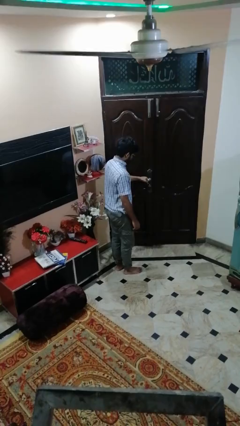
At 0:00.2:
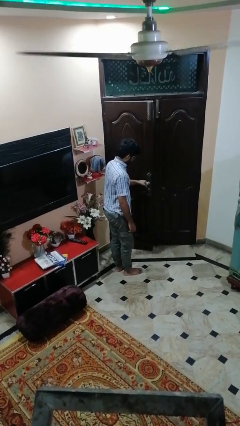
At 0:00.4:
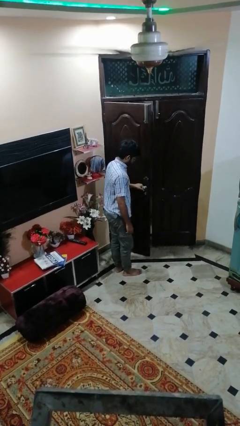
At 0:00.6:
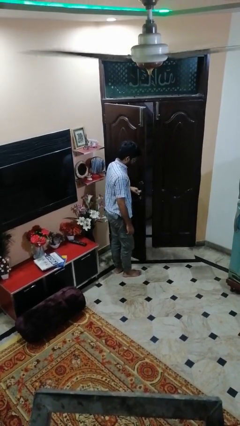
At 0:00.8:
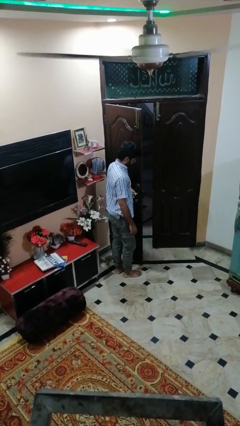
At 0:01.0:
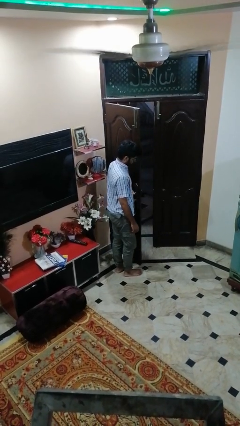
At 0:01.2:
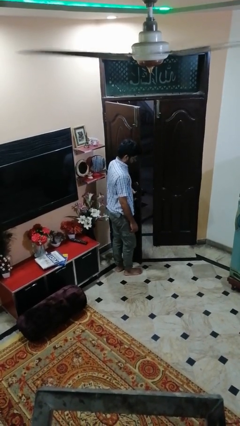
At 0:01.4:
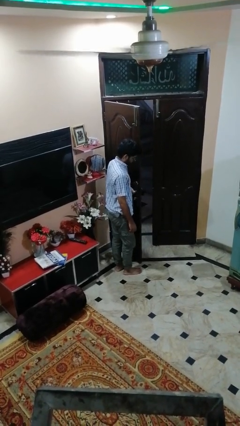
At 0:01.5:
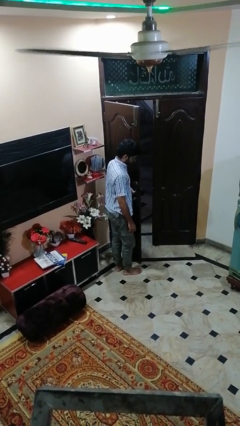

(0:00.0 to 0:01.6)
person opens facility door

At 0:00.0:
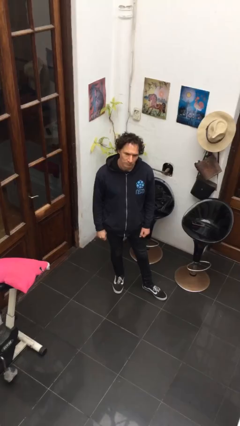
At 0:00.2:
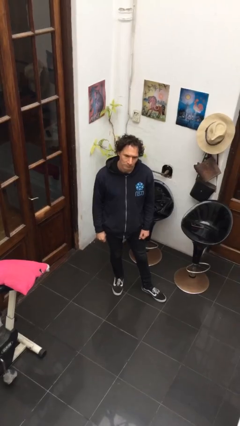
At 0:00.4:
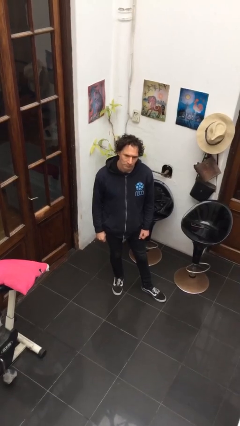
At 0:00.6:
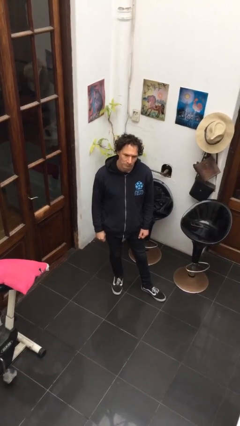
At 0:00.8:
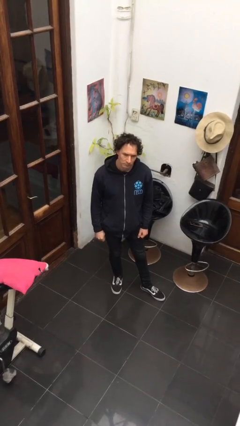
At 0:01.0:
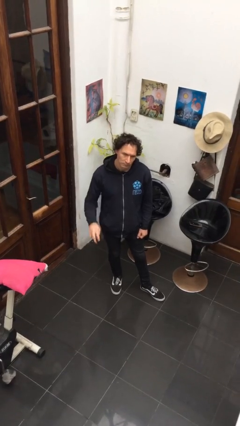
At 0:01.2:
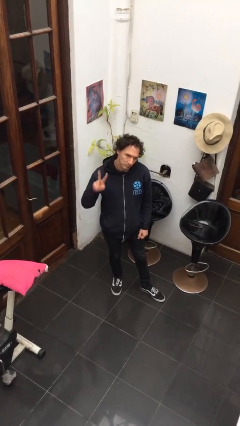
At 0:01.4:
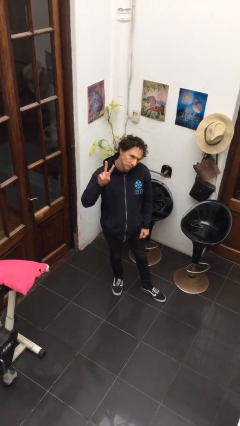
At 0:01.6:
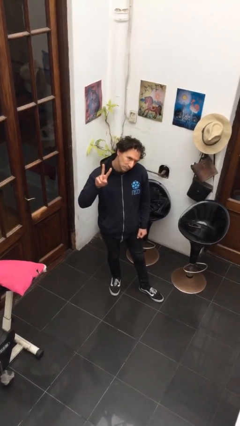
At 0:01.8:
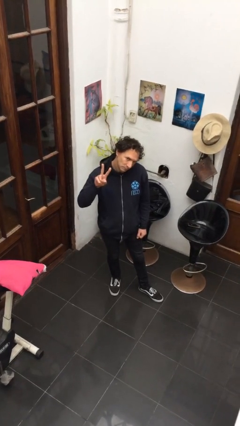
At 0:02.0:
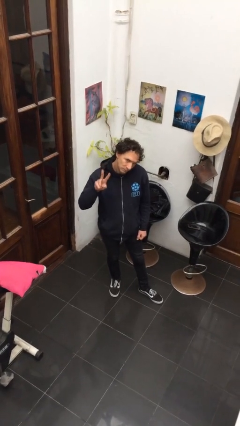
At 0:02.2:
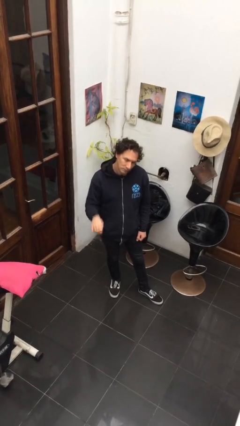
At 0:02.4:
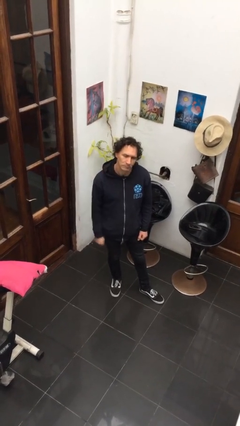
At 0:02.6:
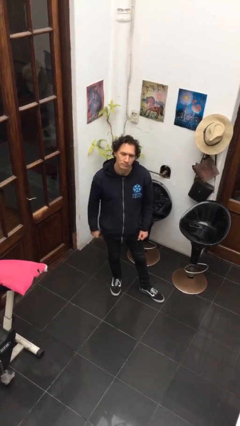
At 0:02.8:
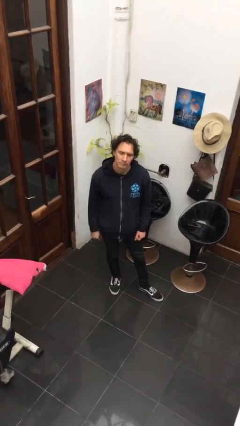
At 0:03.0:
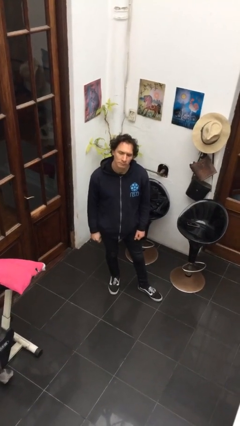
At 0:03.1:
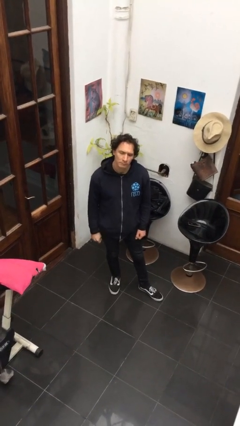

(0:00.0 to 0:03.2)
person gestures peace

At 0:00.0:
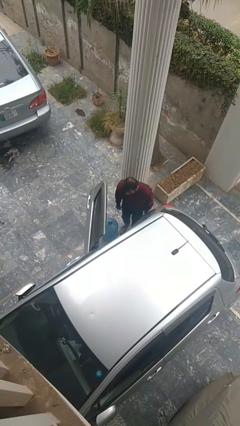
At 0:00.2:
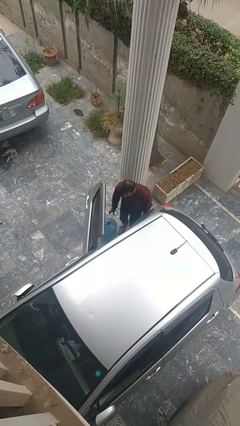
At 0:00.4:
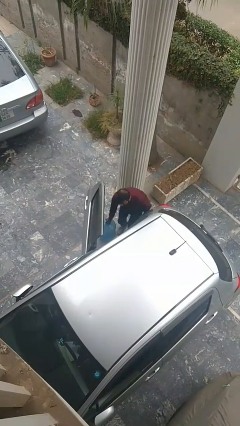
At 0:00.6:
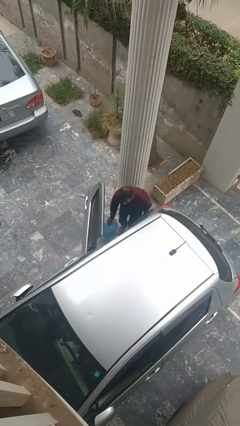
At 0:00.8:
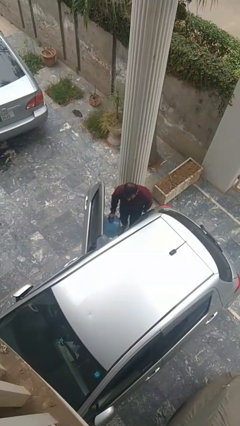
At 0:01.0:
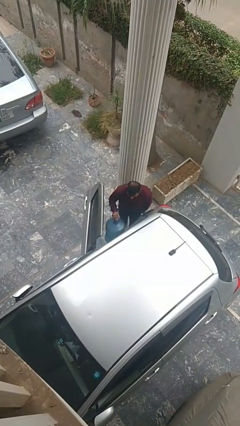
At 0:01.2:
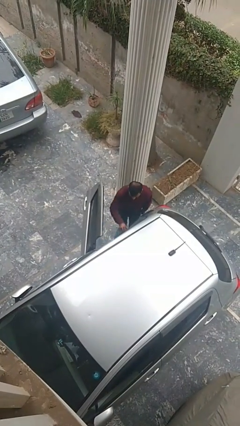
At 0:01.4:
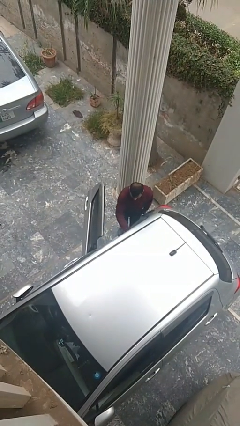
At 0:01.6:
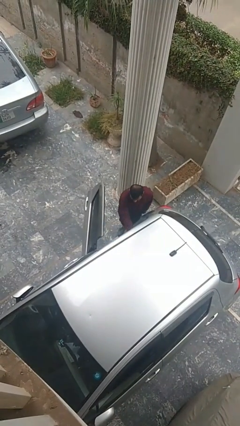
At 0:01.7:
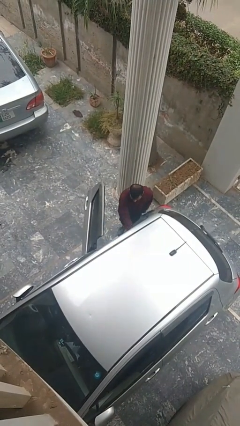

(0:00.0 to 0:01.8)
person loads car

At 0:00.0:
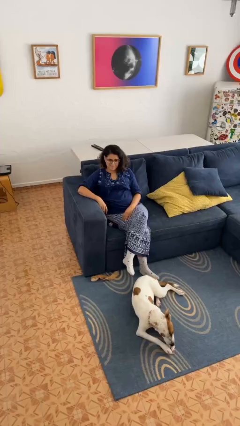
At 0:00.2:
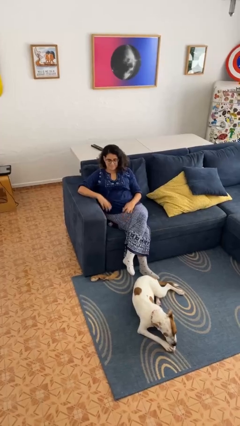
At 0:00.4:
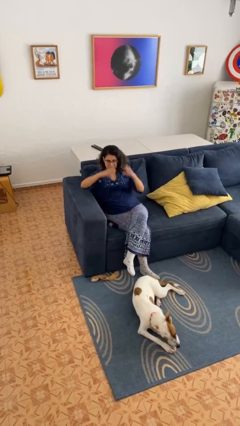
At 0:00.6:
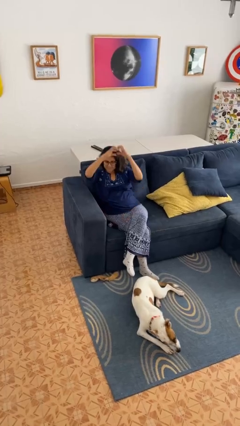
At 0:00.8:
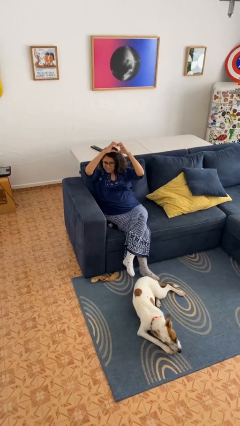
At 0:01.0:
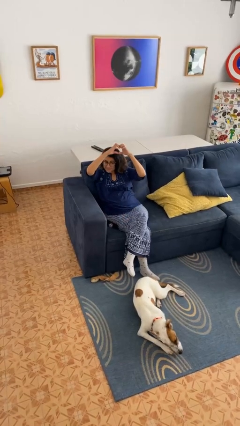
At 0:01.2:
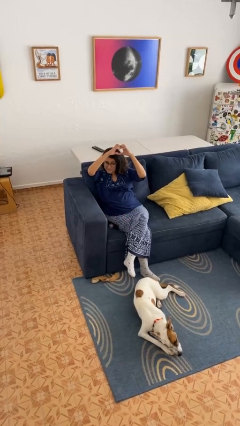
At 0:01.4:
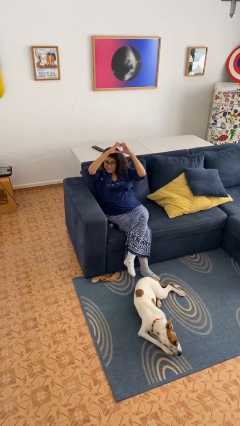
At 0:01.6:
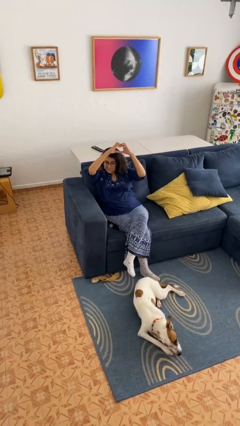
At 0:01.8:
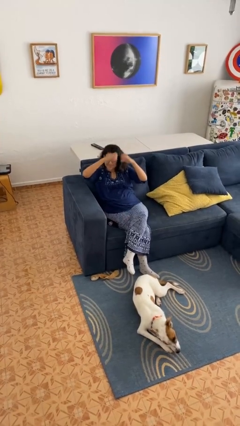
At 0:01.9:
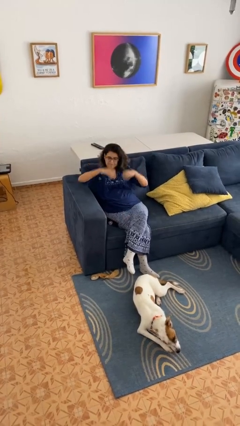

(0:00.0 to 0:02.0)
person gestures heart

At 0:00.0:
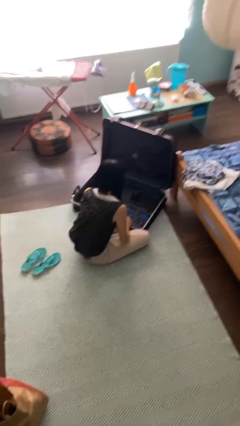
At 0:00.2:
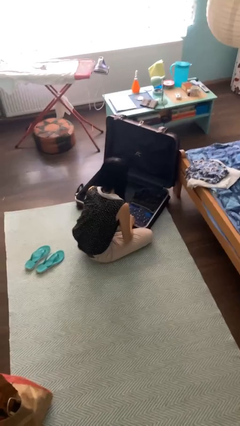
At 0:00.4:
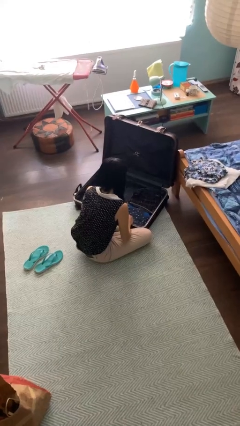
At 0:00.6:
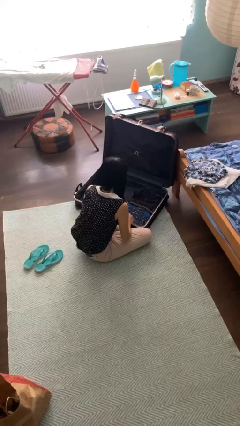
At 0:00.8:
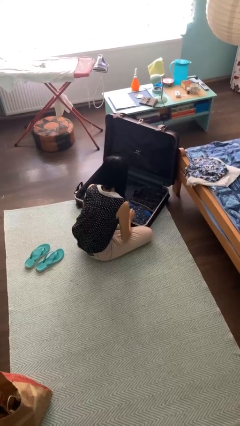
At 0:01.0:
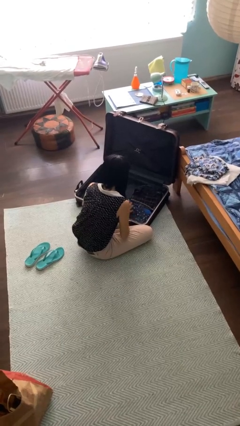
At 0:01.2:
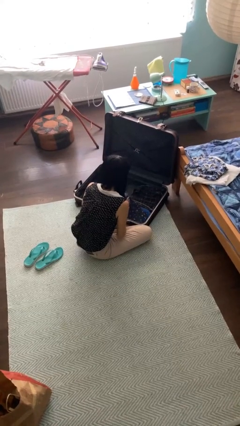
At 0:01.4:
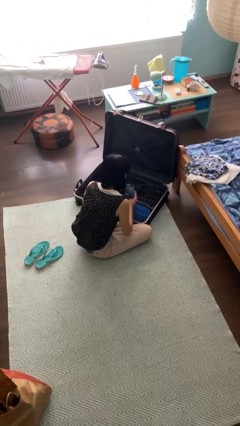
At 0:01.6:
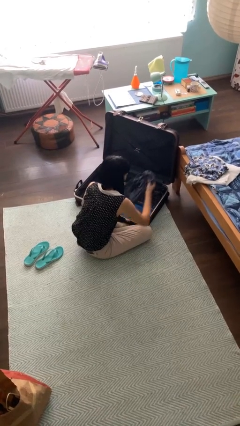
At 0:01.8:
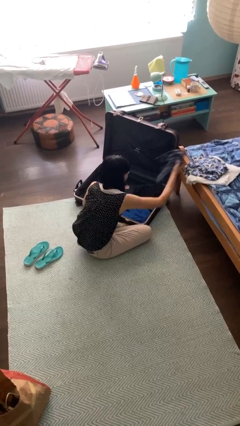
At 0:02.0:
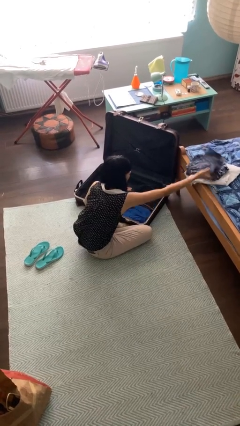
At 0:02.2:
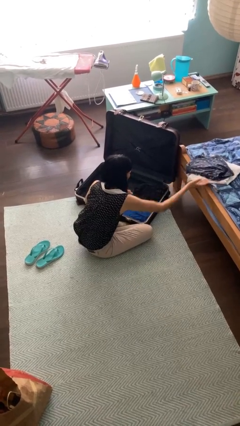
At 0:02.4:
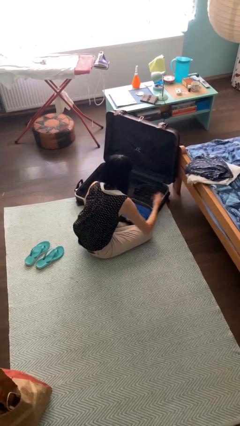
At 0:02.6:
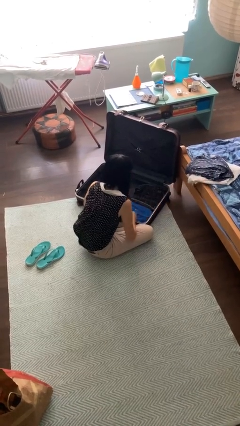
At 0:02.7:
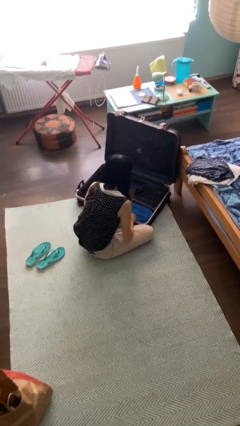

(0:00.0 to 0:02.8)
person unloads clothes from suitcase

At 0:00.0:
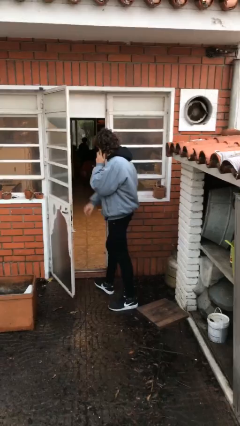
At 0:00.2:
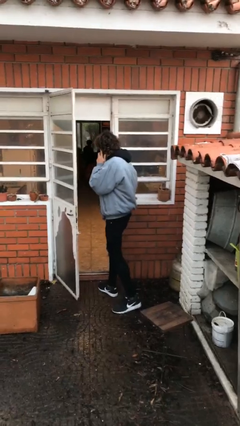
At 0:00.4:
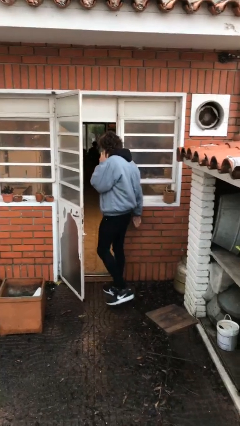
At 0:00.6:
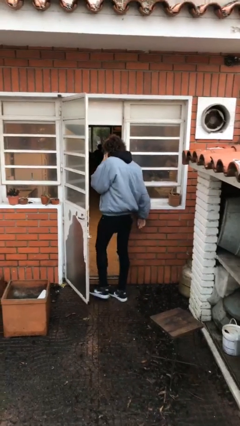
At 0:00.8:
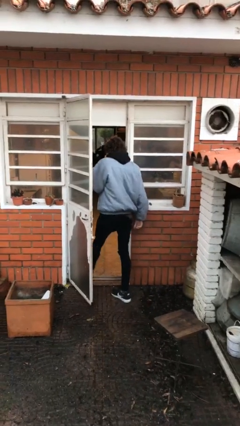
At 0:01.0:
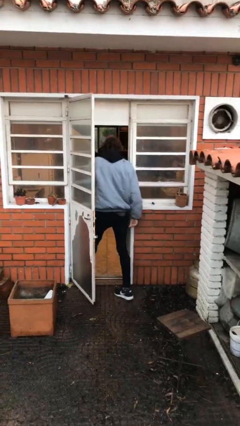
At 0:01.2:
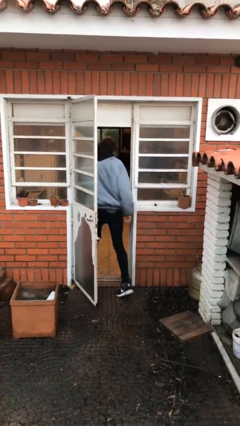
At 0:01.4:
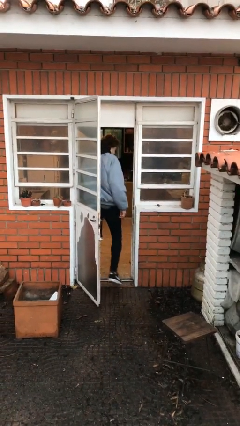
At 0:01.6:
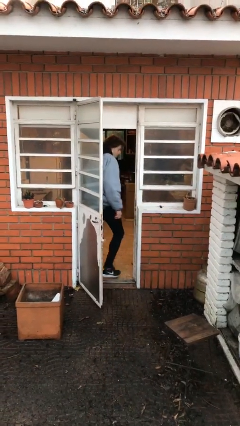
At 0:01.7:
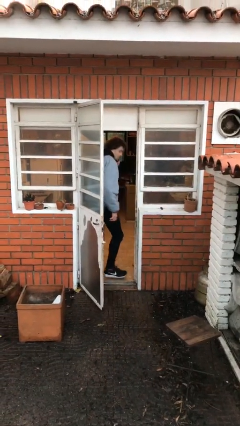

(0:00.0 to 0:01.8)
person exits scene through structure

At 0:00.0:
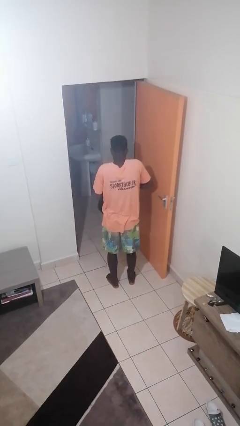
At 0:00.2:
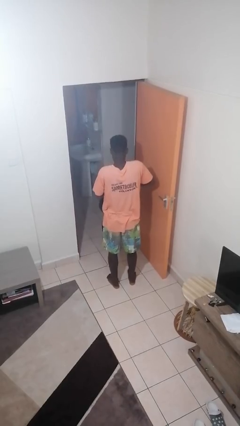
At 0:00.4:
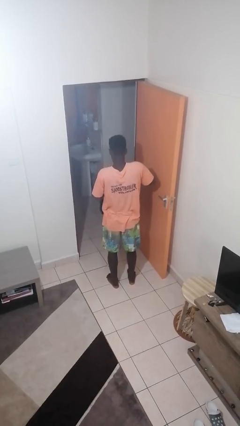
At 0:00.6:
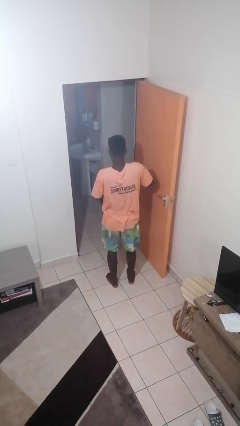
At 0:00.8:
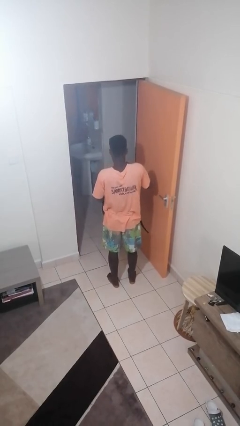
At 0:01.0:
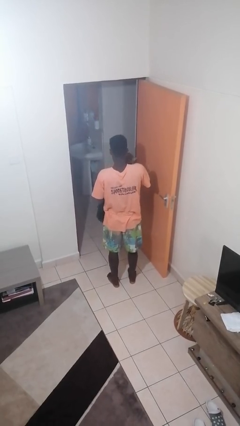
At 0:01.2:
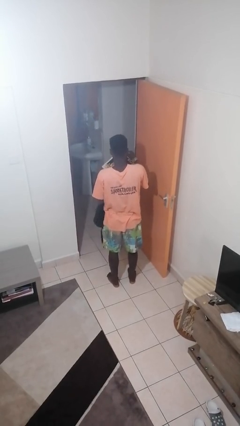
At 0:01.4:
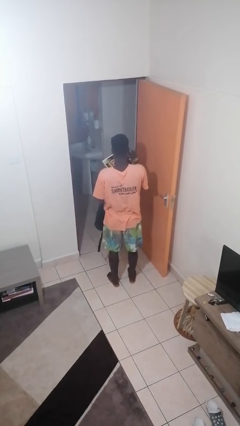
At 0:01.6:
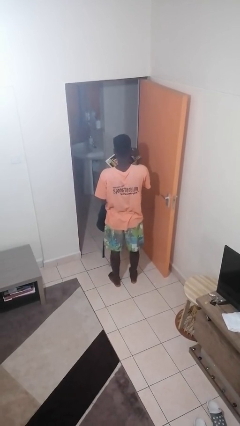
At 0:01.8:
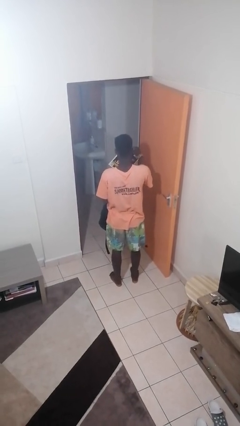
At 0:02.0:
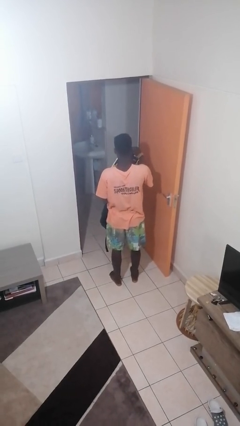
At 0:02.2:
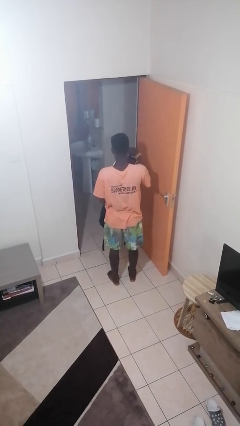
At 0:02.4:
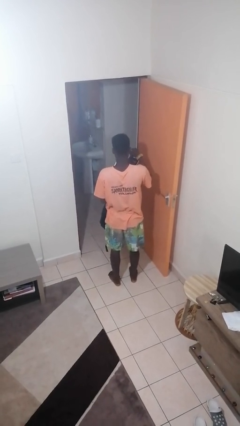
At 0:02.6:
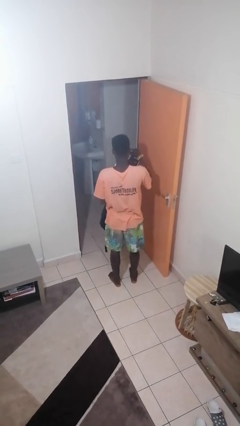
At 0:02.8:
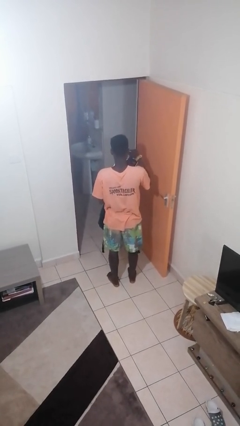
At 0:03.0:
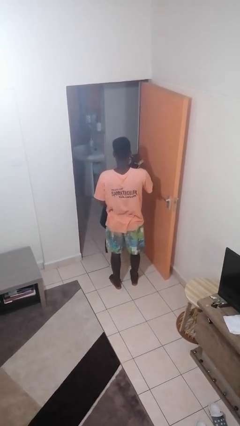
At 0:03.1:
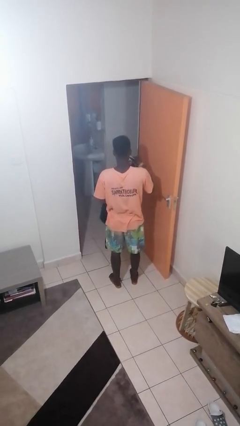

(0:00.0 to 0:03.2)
person takes object from backpack

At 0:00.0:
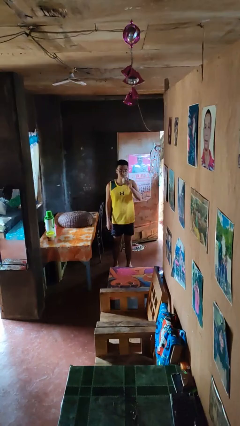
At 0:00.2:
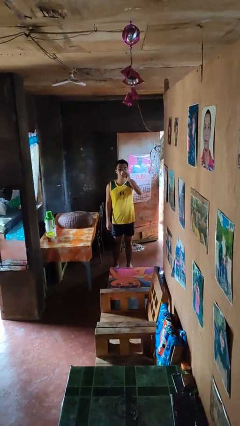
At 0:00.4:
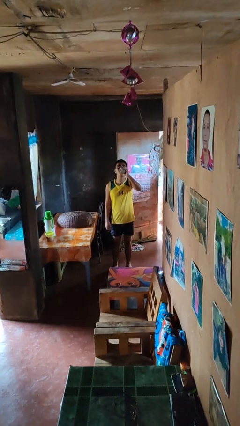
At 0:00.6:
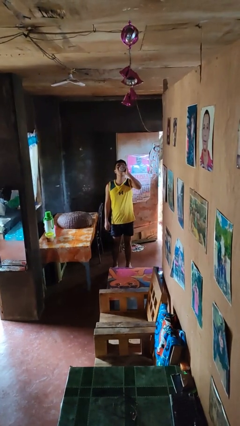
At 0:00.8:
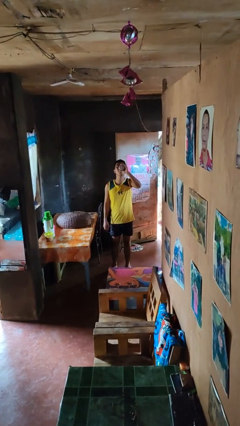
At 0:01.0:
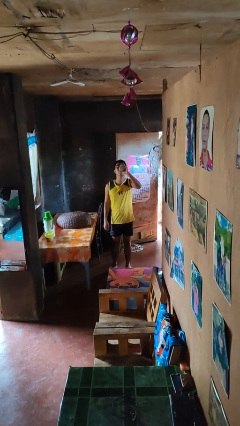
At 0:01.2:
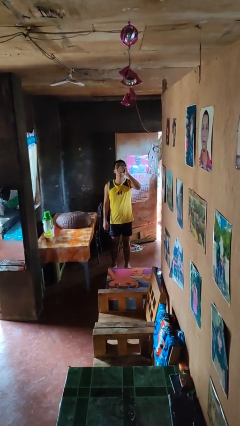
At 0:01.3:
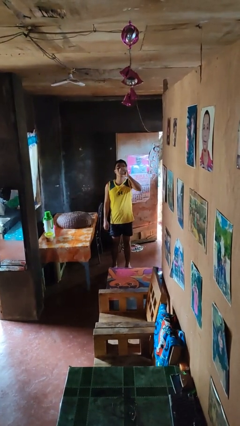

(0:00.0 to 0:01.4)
person drinks from beverage can
